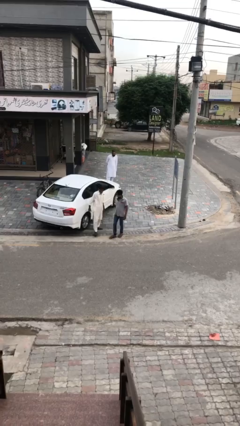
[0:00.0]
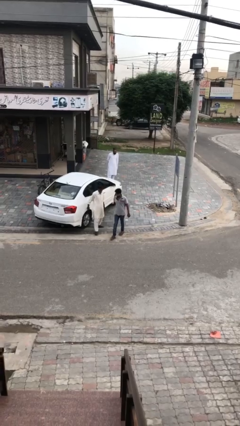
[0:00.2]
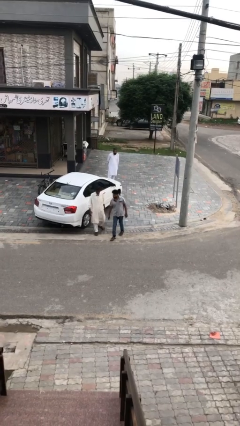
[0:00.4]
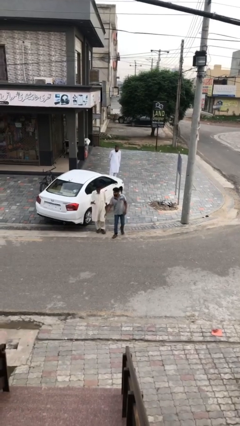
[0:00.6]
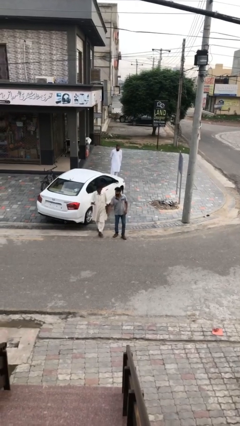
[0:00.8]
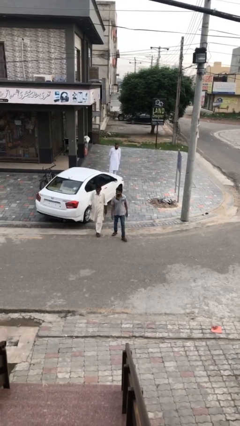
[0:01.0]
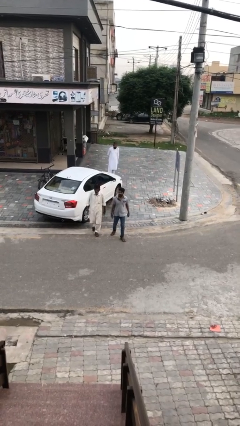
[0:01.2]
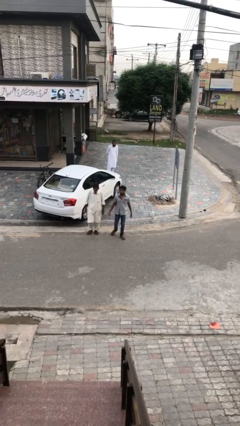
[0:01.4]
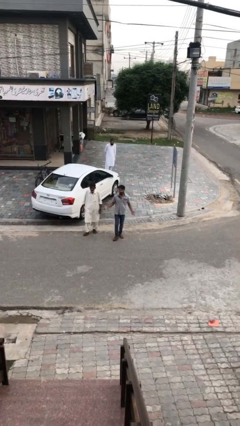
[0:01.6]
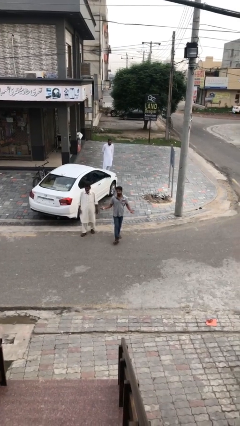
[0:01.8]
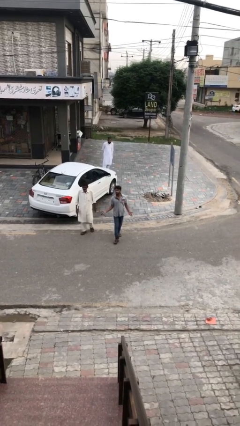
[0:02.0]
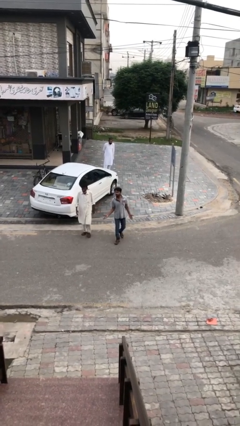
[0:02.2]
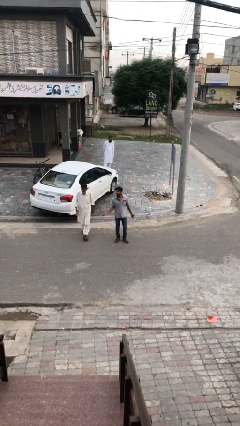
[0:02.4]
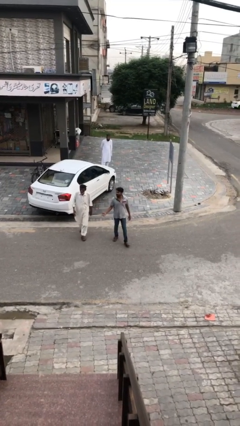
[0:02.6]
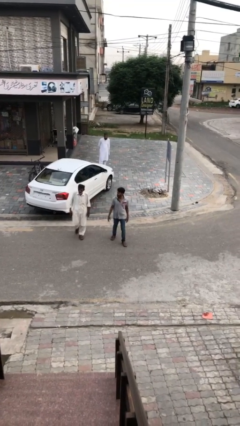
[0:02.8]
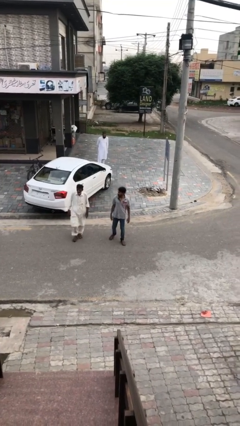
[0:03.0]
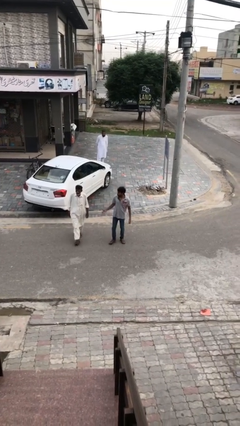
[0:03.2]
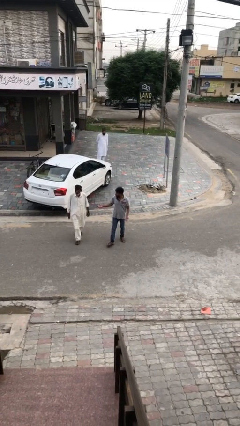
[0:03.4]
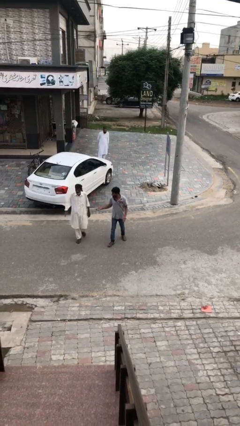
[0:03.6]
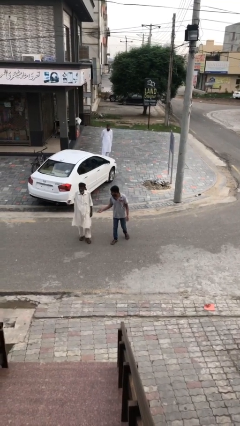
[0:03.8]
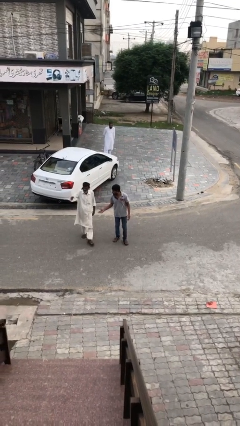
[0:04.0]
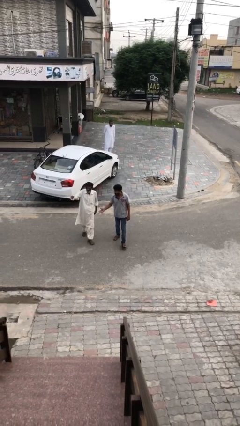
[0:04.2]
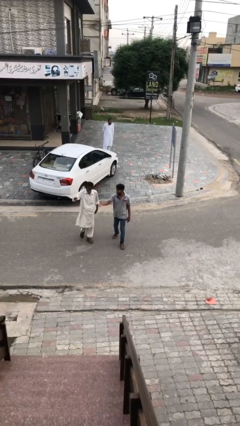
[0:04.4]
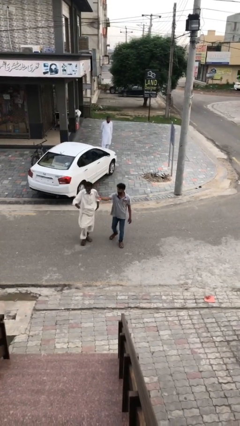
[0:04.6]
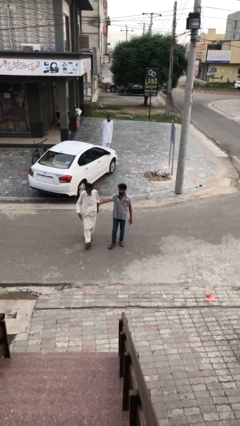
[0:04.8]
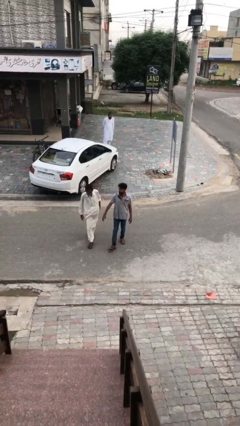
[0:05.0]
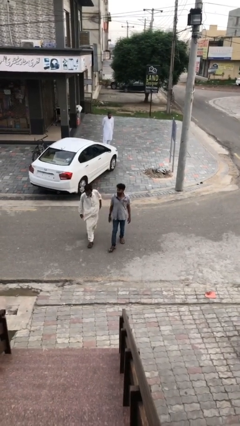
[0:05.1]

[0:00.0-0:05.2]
person talks to person

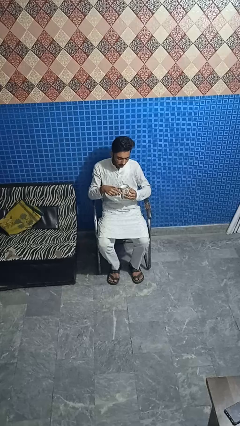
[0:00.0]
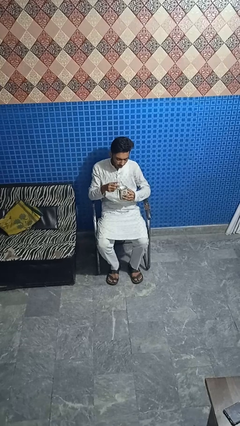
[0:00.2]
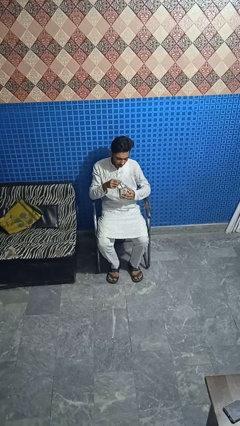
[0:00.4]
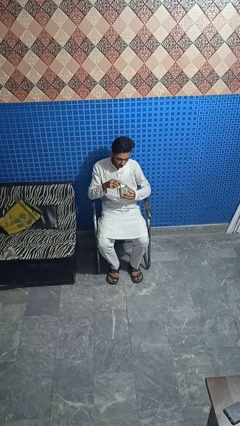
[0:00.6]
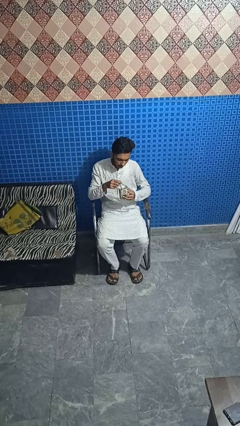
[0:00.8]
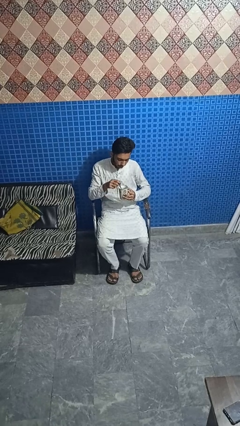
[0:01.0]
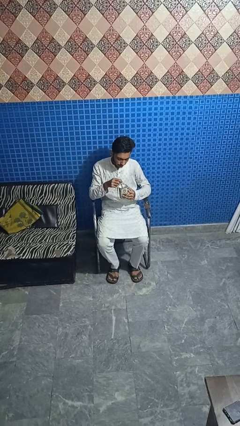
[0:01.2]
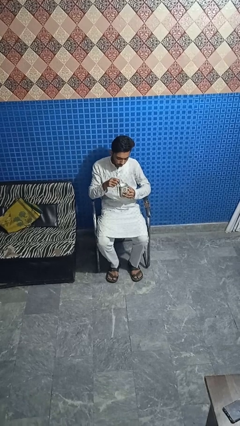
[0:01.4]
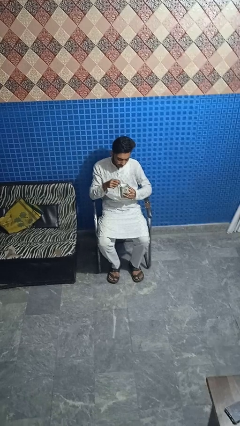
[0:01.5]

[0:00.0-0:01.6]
person stirs mug

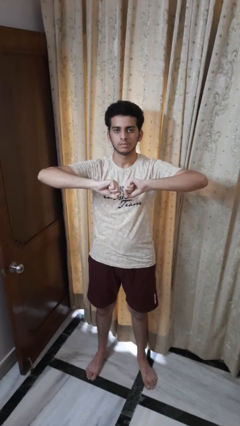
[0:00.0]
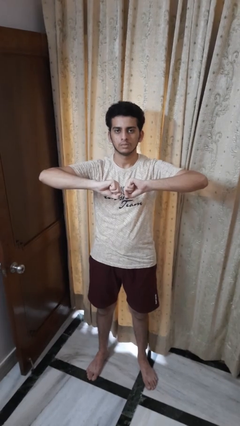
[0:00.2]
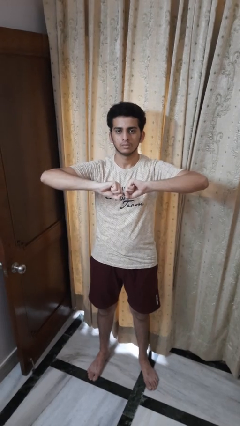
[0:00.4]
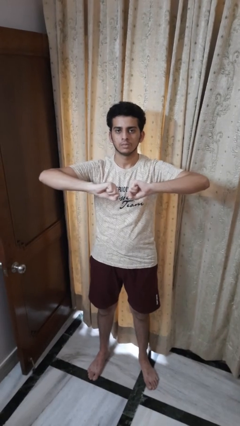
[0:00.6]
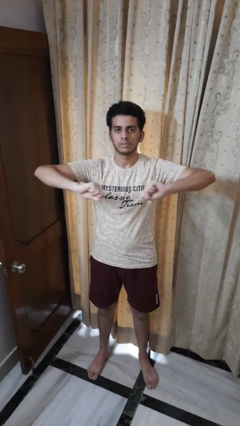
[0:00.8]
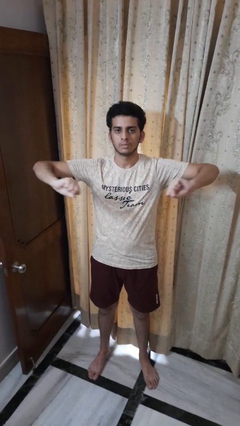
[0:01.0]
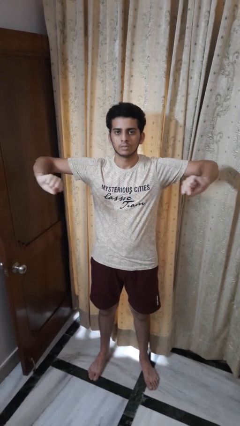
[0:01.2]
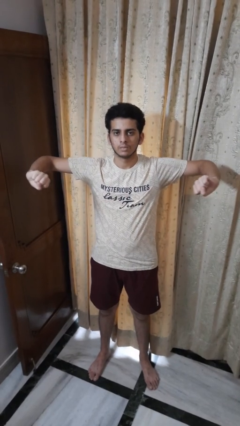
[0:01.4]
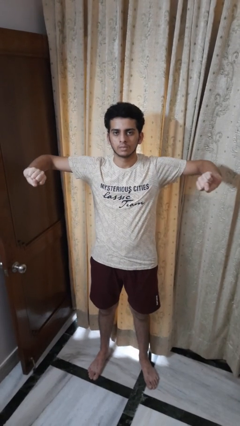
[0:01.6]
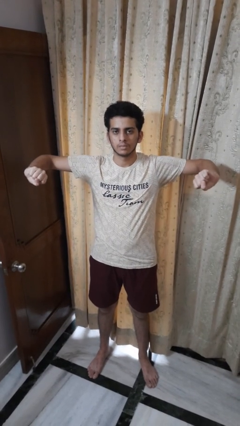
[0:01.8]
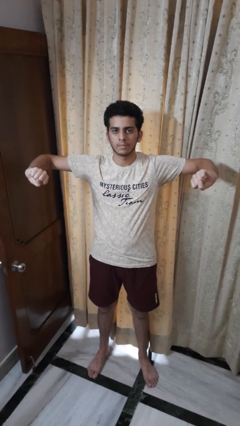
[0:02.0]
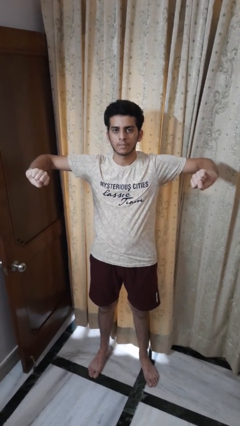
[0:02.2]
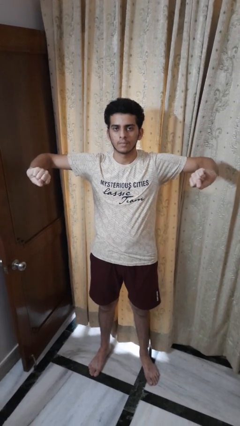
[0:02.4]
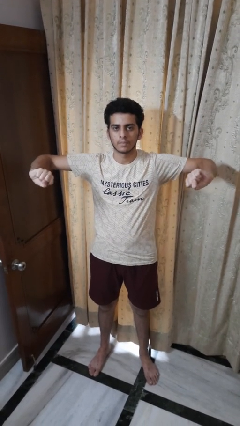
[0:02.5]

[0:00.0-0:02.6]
person gestures zoom in

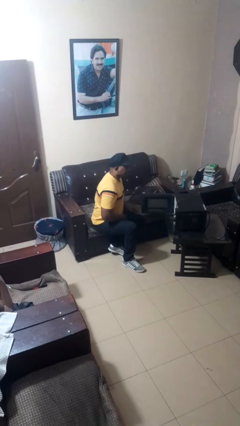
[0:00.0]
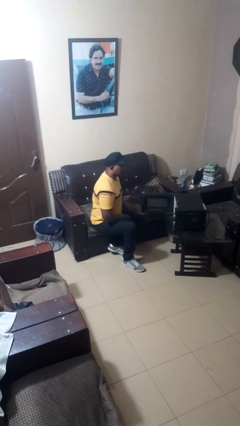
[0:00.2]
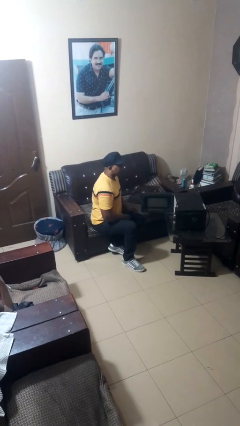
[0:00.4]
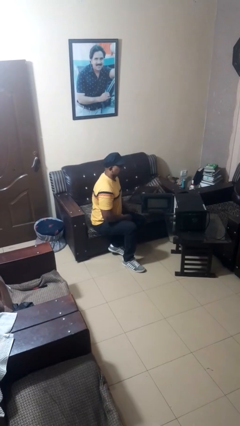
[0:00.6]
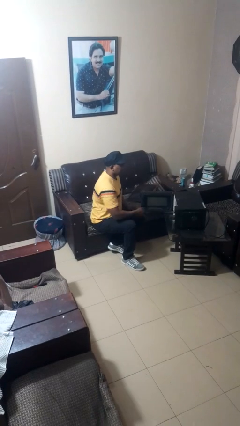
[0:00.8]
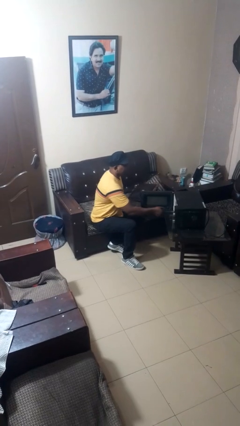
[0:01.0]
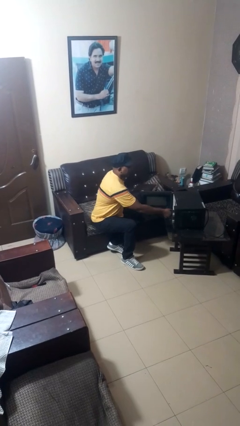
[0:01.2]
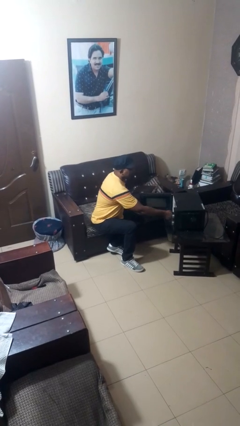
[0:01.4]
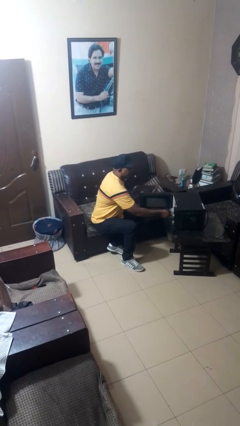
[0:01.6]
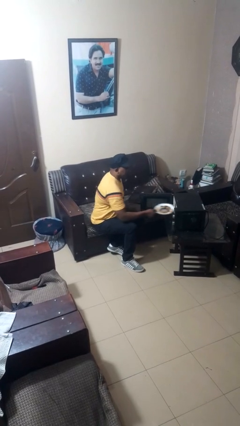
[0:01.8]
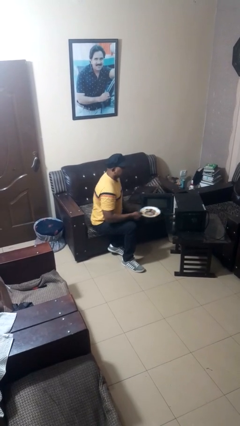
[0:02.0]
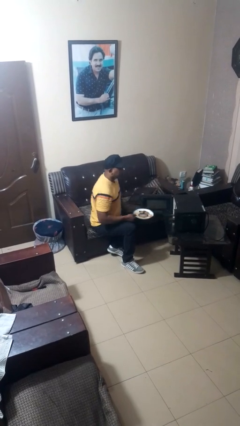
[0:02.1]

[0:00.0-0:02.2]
person takes object from microwave

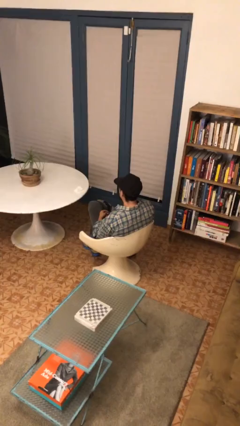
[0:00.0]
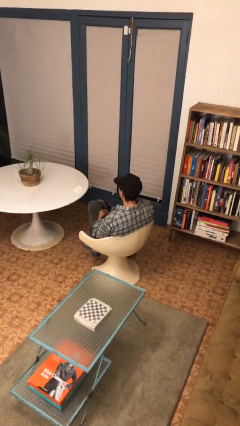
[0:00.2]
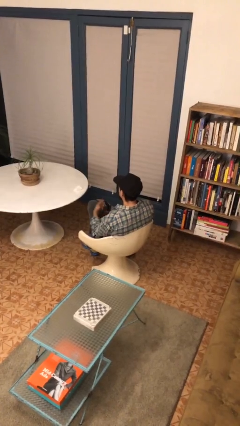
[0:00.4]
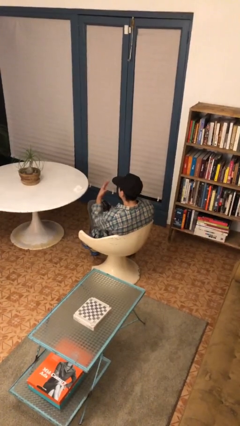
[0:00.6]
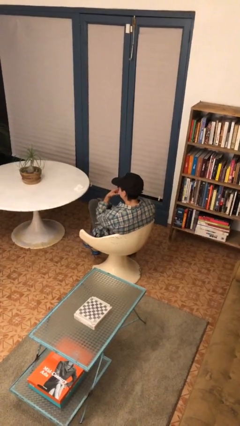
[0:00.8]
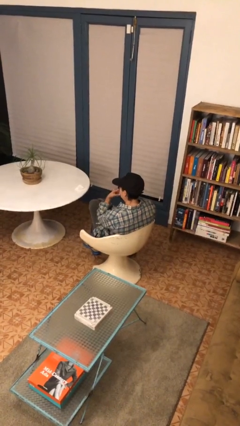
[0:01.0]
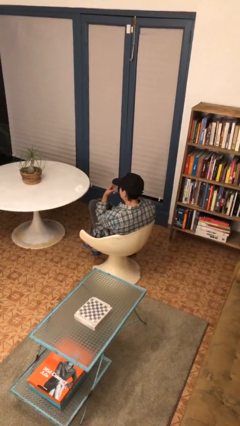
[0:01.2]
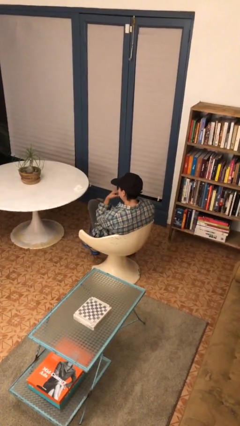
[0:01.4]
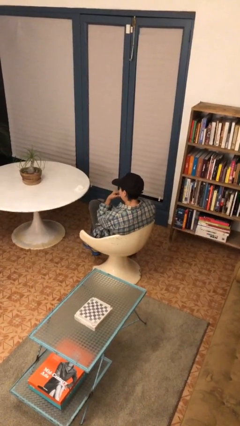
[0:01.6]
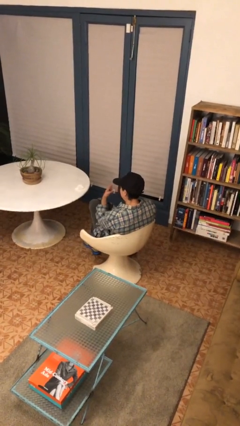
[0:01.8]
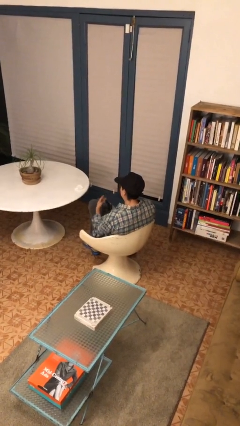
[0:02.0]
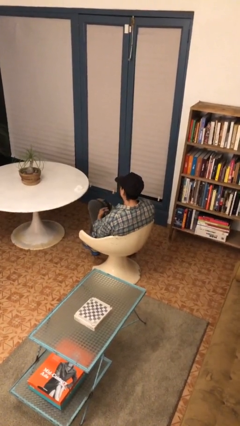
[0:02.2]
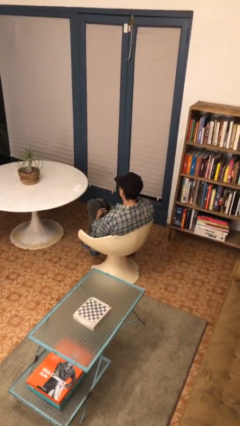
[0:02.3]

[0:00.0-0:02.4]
person gestures watch closely

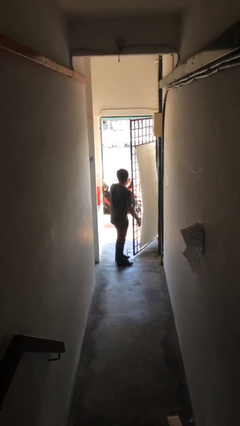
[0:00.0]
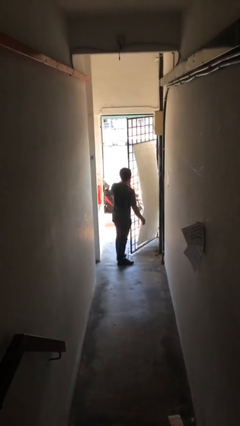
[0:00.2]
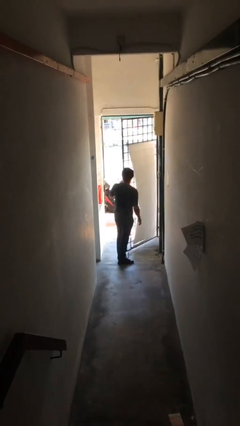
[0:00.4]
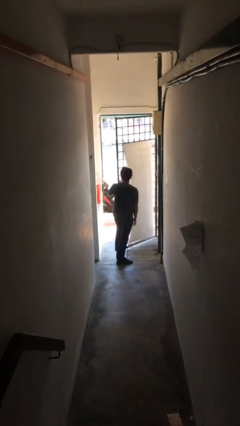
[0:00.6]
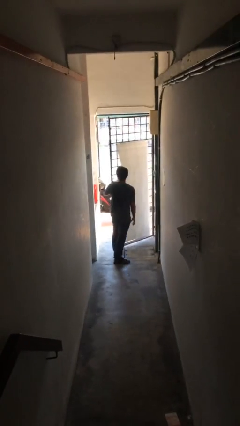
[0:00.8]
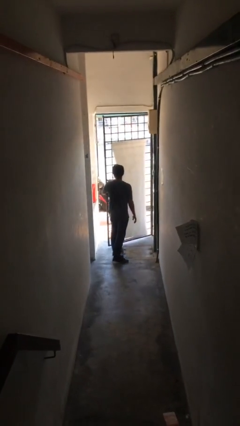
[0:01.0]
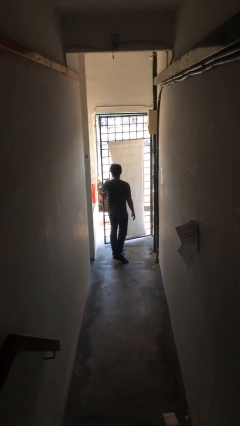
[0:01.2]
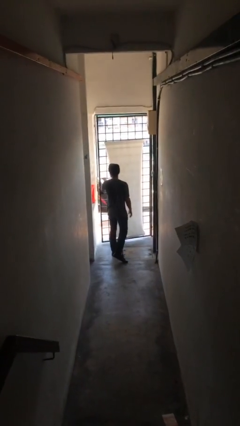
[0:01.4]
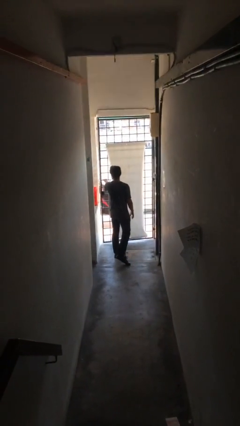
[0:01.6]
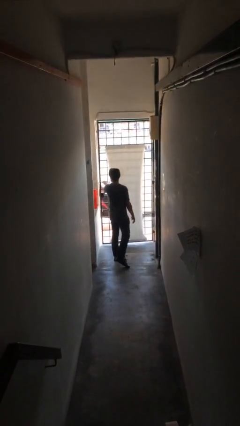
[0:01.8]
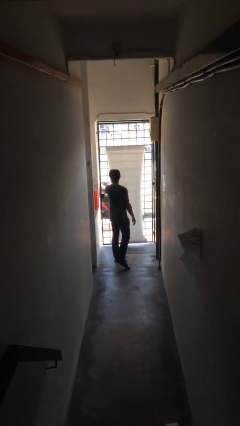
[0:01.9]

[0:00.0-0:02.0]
person closes facility door

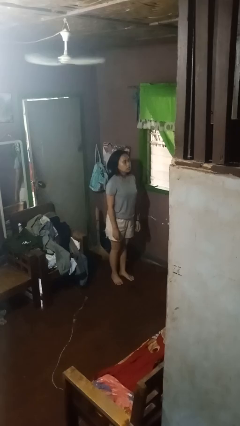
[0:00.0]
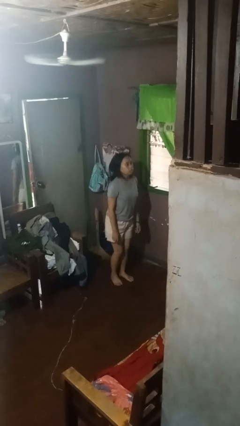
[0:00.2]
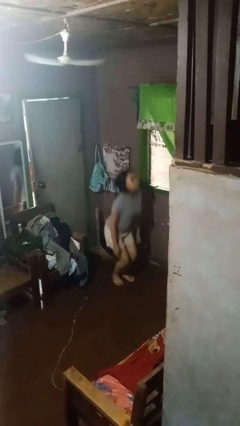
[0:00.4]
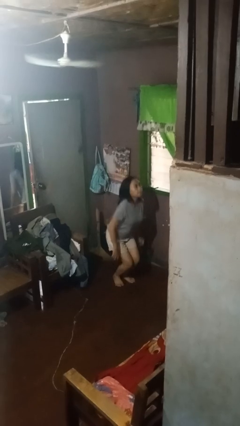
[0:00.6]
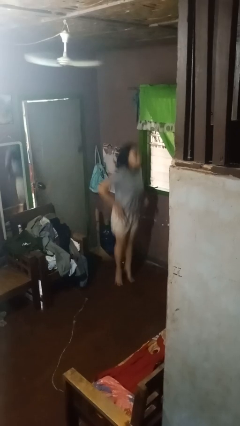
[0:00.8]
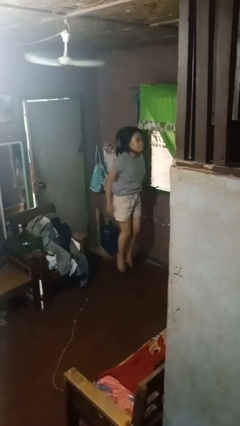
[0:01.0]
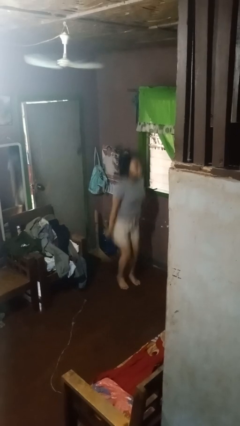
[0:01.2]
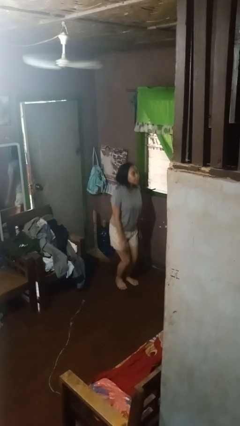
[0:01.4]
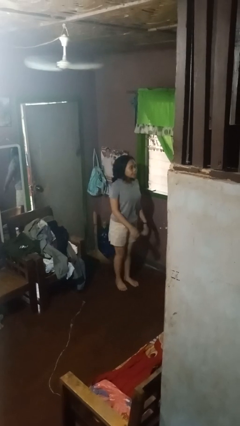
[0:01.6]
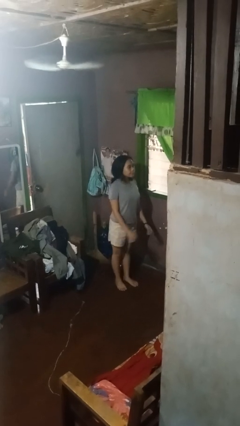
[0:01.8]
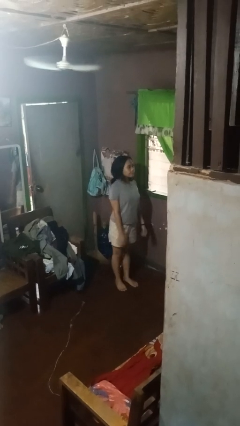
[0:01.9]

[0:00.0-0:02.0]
person jumps
